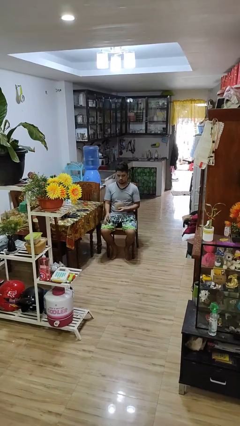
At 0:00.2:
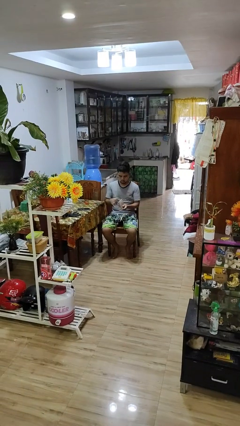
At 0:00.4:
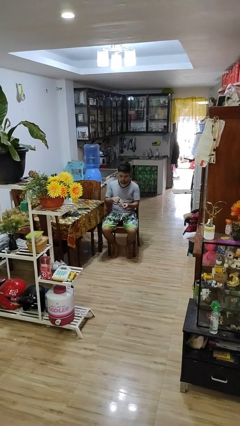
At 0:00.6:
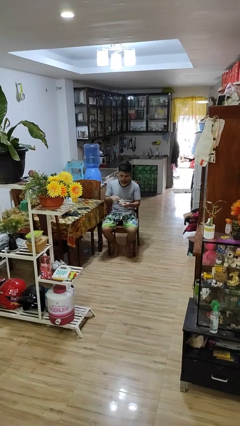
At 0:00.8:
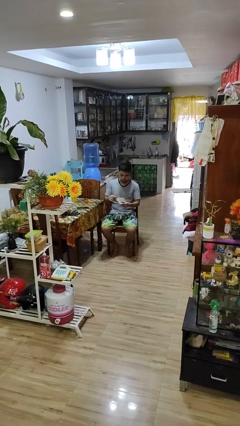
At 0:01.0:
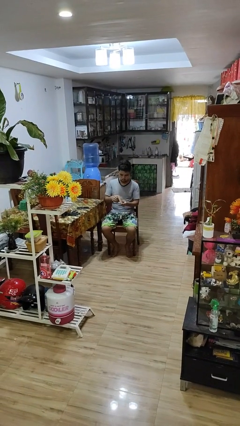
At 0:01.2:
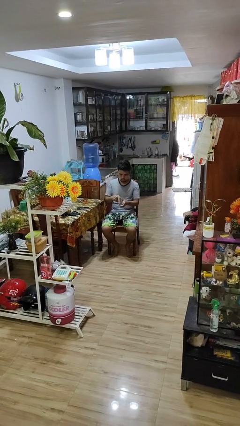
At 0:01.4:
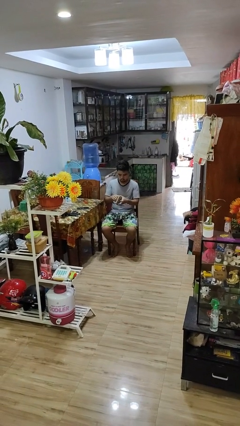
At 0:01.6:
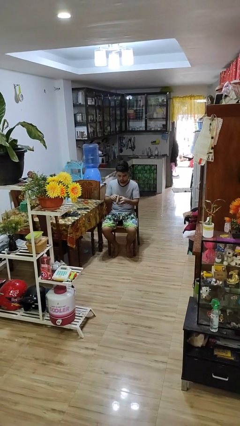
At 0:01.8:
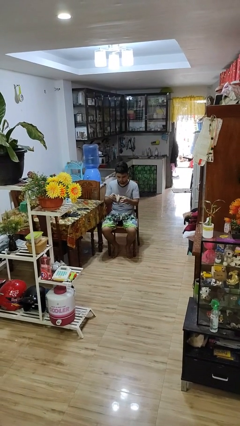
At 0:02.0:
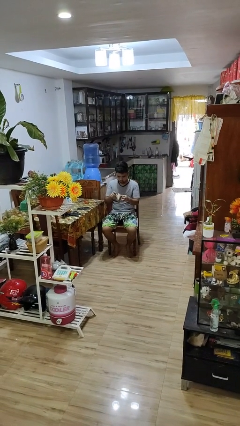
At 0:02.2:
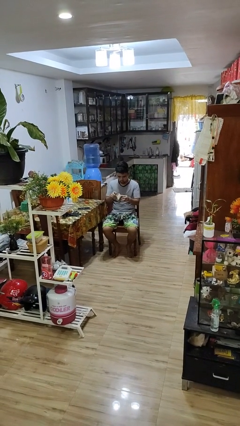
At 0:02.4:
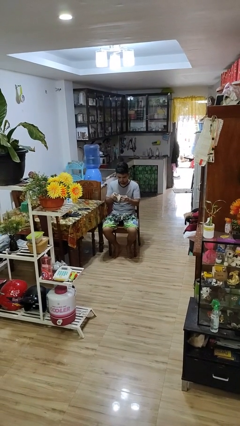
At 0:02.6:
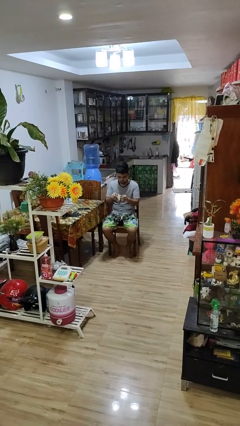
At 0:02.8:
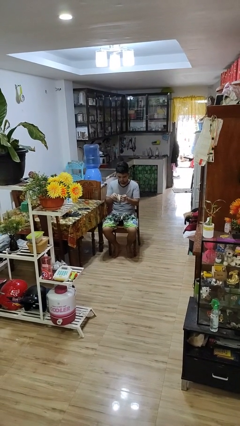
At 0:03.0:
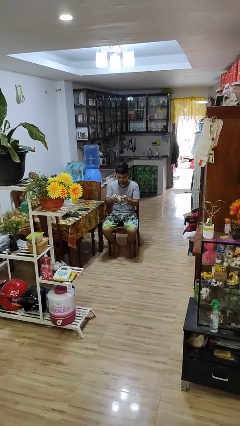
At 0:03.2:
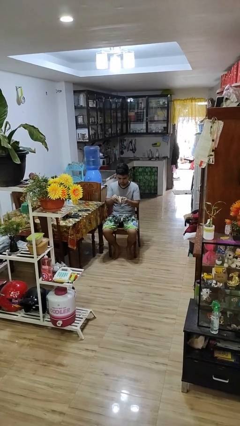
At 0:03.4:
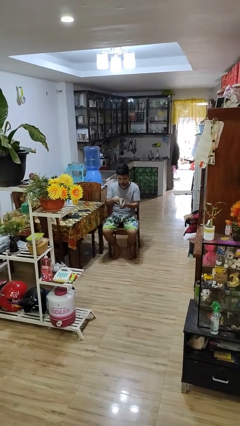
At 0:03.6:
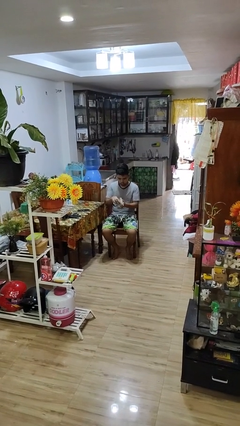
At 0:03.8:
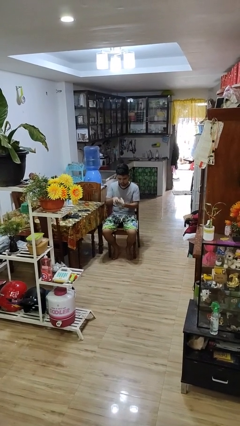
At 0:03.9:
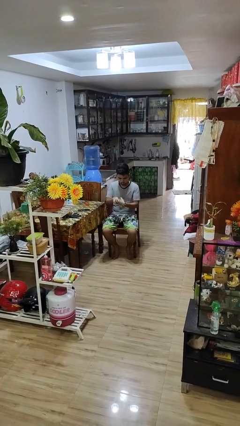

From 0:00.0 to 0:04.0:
person searches in purse

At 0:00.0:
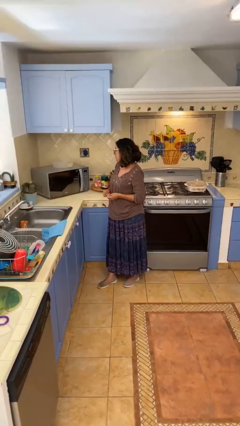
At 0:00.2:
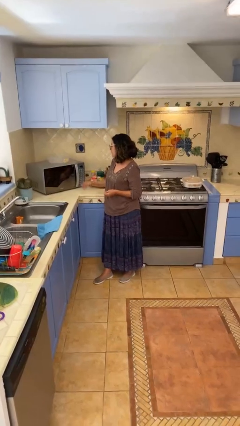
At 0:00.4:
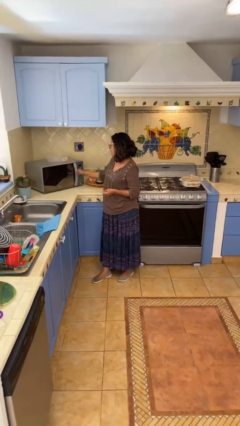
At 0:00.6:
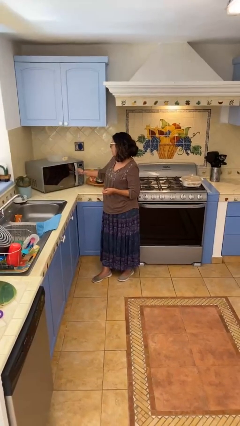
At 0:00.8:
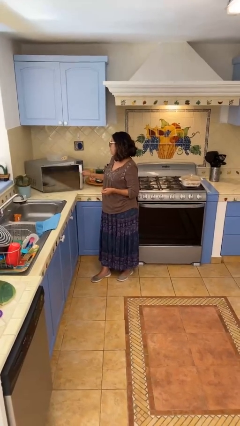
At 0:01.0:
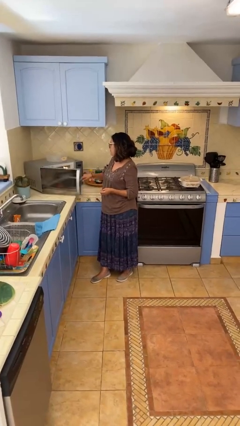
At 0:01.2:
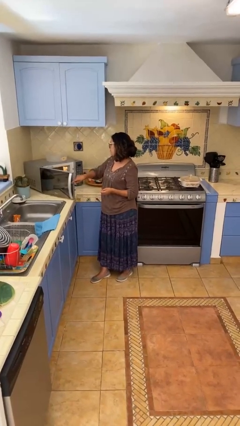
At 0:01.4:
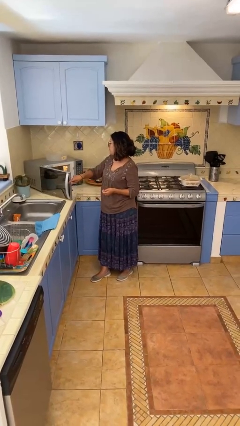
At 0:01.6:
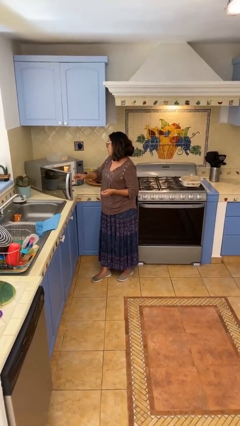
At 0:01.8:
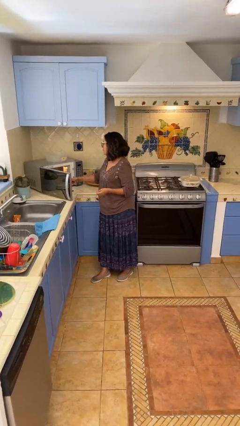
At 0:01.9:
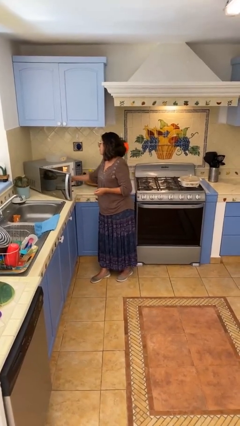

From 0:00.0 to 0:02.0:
person opens microwave

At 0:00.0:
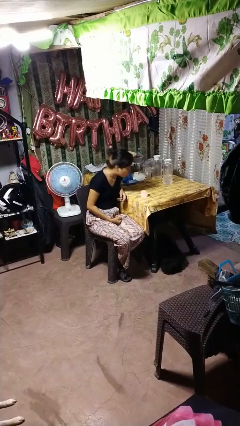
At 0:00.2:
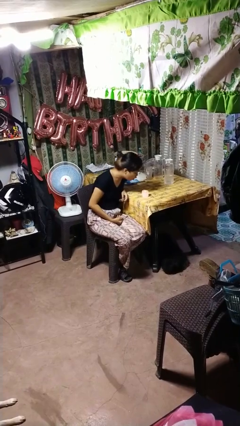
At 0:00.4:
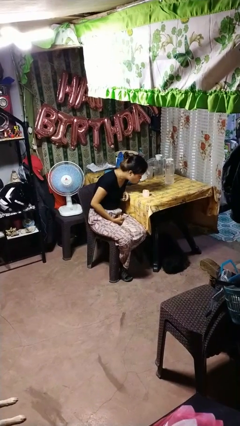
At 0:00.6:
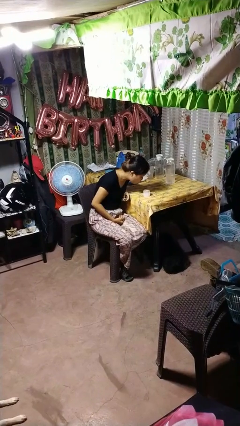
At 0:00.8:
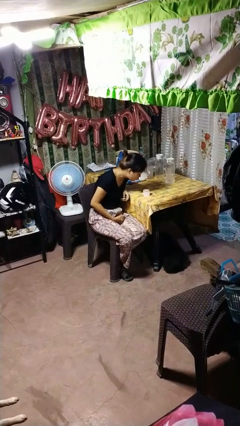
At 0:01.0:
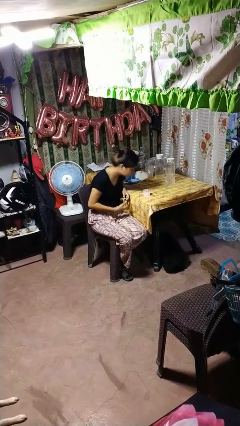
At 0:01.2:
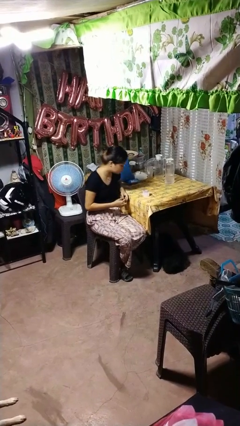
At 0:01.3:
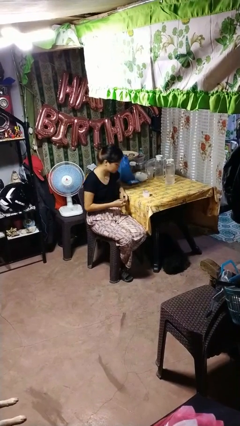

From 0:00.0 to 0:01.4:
person extinguishes candle

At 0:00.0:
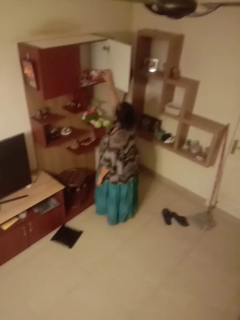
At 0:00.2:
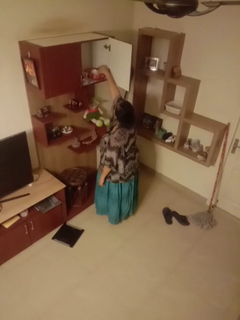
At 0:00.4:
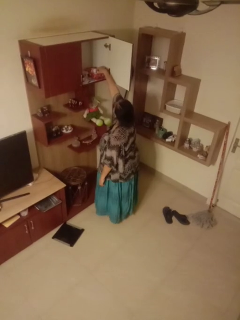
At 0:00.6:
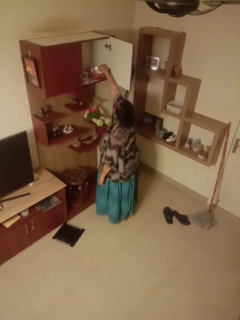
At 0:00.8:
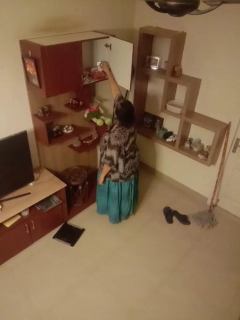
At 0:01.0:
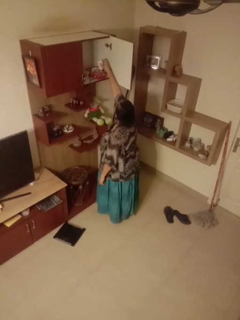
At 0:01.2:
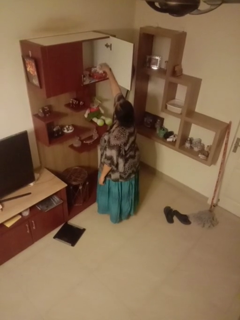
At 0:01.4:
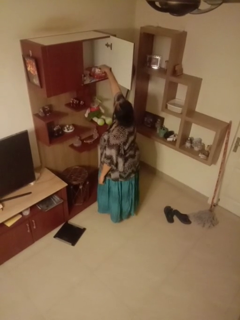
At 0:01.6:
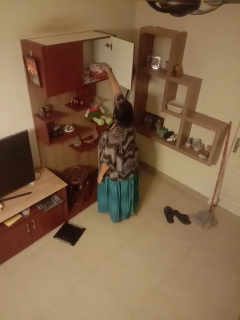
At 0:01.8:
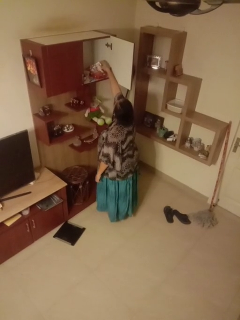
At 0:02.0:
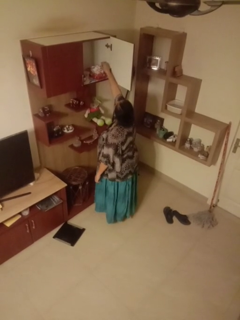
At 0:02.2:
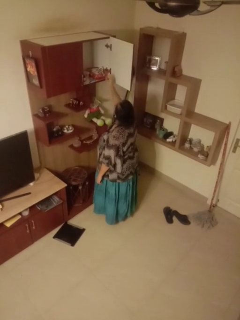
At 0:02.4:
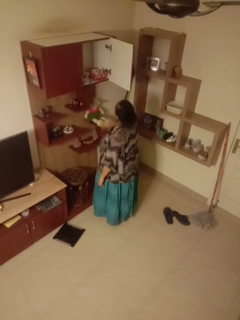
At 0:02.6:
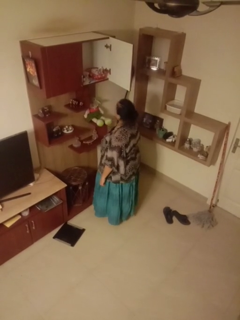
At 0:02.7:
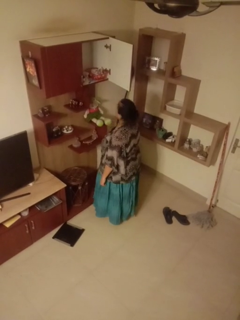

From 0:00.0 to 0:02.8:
person searches in cabinet

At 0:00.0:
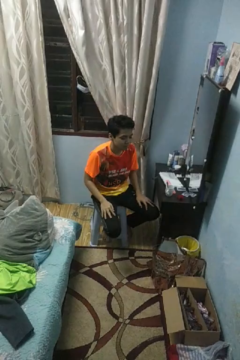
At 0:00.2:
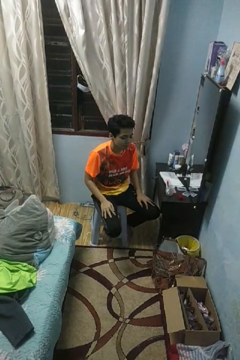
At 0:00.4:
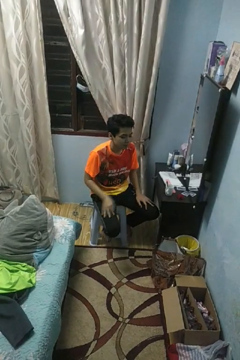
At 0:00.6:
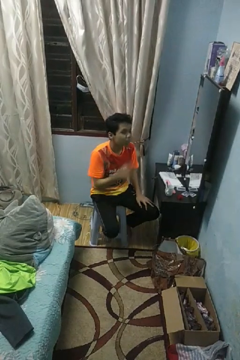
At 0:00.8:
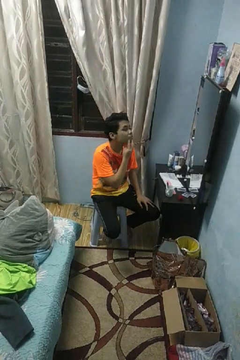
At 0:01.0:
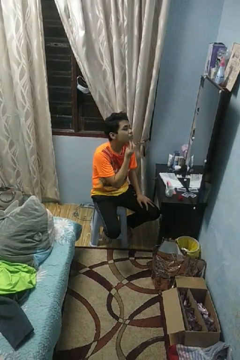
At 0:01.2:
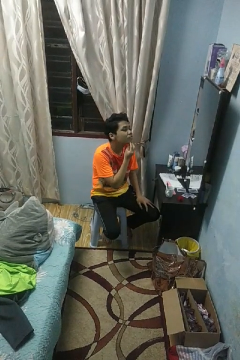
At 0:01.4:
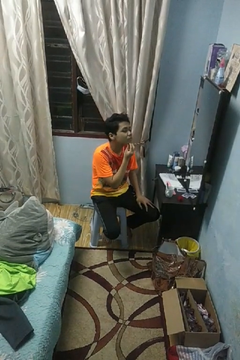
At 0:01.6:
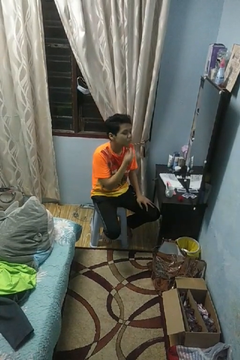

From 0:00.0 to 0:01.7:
person strokes chin

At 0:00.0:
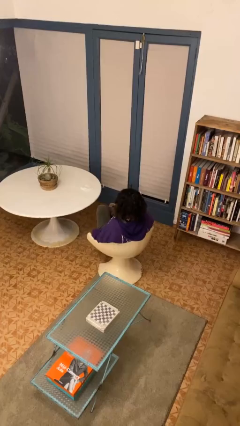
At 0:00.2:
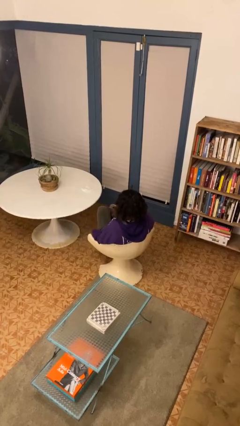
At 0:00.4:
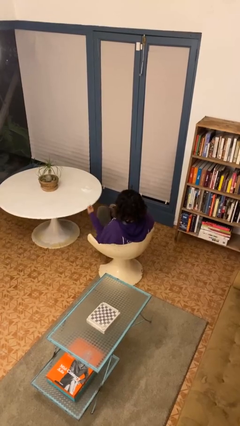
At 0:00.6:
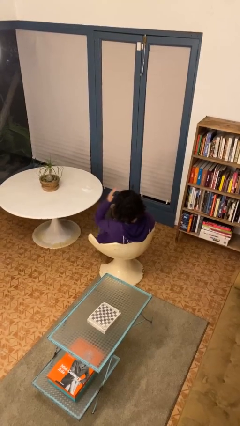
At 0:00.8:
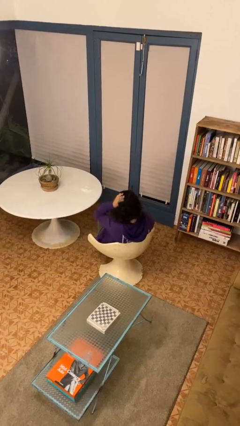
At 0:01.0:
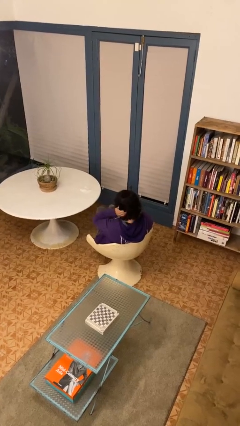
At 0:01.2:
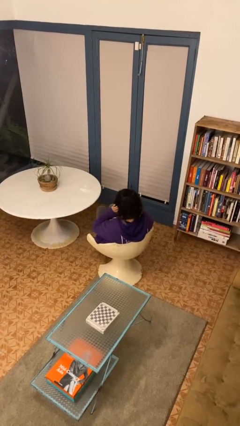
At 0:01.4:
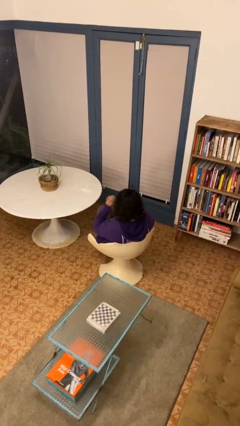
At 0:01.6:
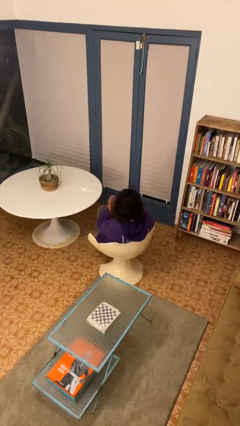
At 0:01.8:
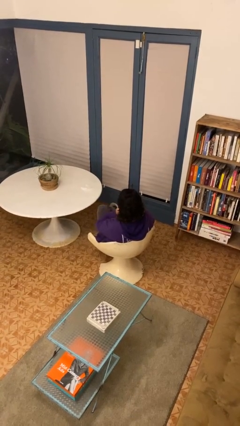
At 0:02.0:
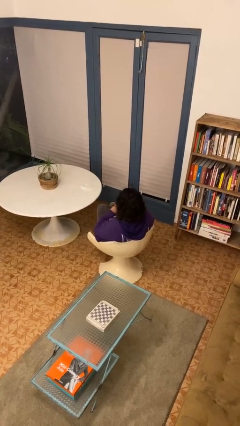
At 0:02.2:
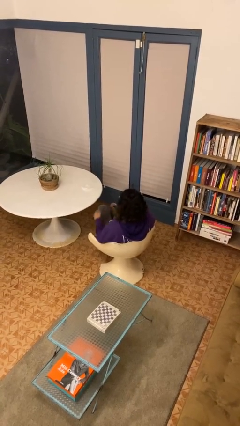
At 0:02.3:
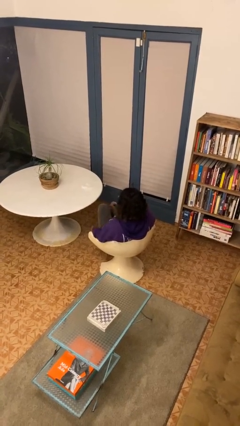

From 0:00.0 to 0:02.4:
person strokes hair

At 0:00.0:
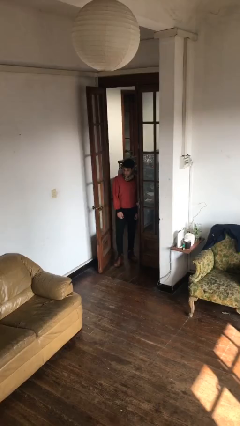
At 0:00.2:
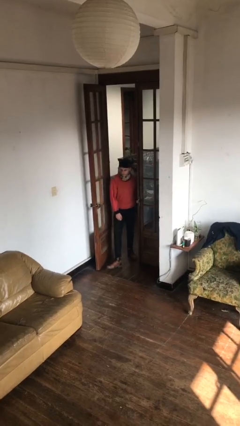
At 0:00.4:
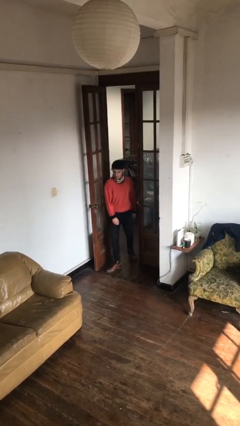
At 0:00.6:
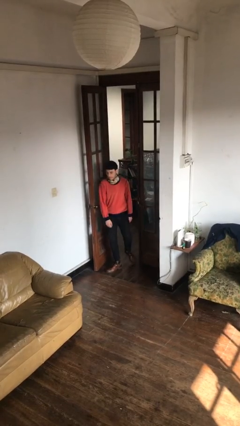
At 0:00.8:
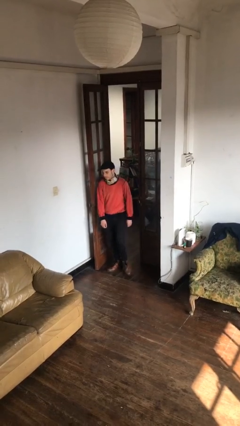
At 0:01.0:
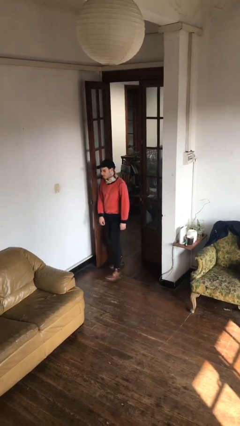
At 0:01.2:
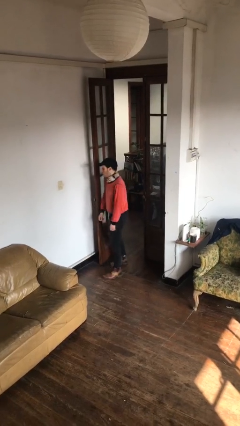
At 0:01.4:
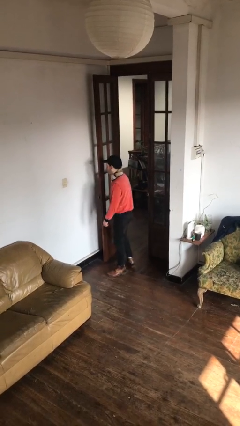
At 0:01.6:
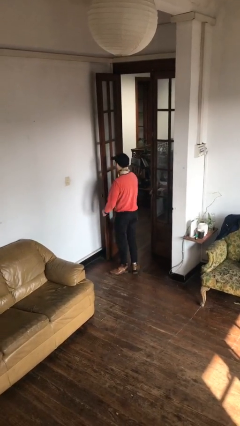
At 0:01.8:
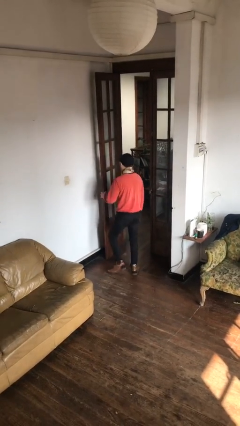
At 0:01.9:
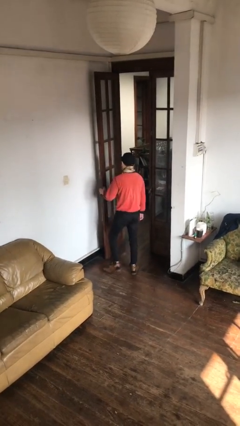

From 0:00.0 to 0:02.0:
person enters scene through structure

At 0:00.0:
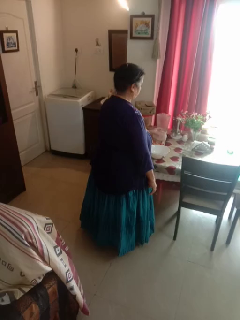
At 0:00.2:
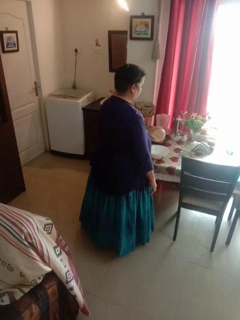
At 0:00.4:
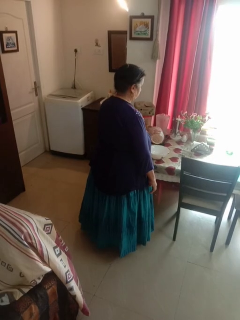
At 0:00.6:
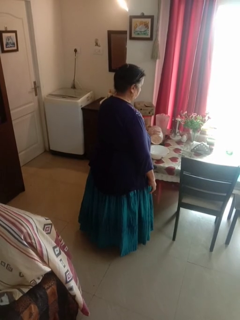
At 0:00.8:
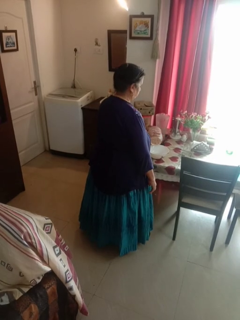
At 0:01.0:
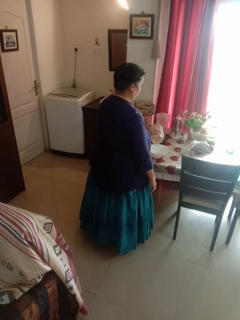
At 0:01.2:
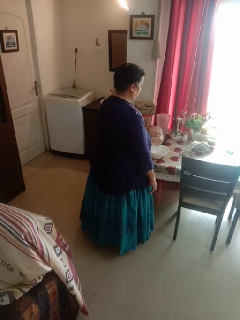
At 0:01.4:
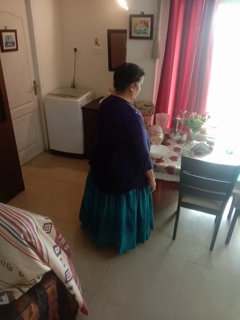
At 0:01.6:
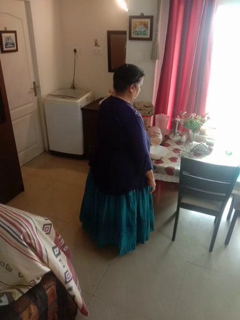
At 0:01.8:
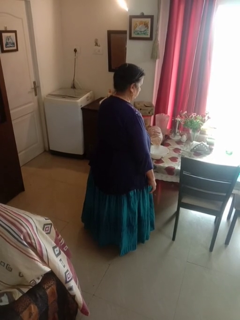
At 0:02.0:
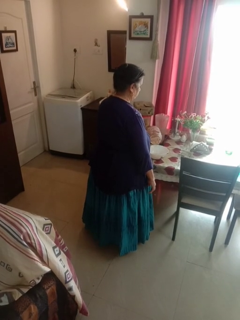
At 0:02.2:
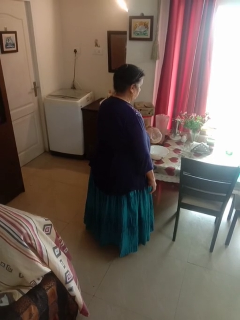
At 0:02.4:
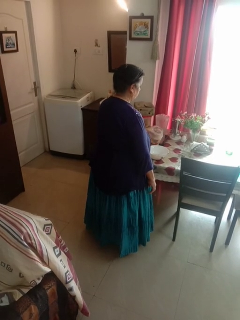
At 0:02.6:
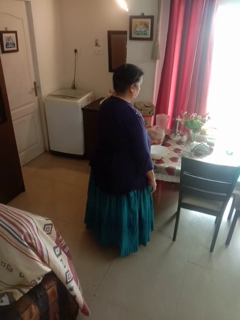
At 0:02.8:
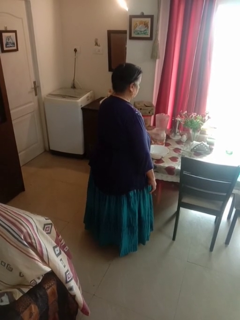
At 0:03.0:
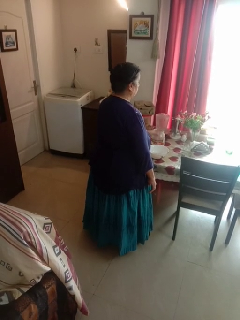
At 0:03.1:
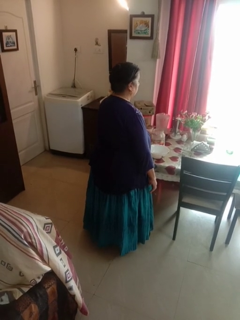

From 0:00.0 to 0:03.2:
person pours into bowl
